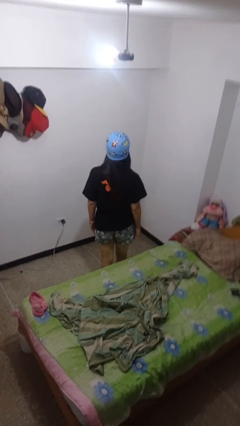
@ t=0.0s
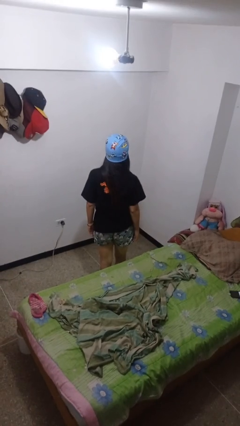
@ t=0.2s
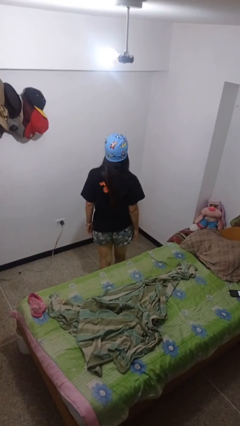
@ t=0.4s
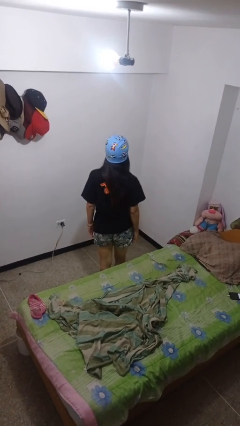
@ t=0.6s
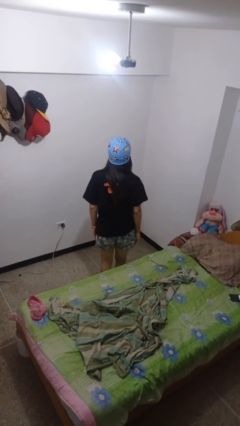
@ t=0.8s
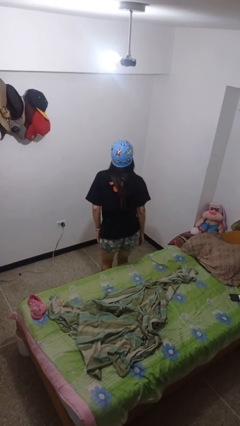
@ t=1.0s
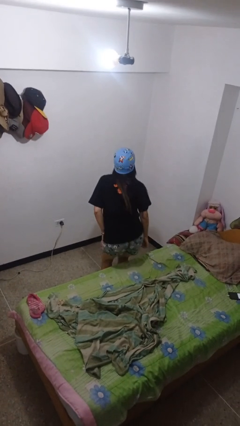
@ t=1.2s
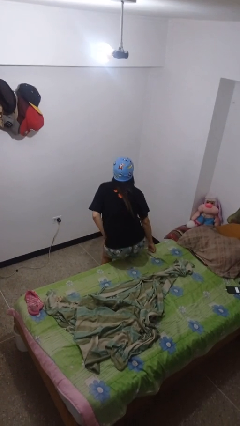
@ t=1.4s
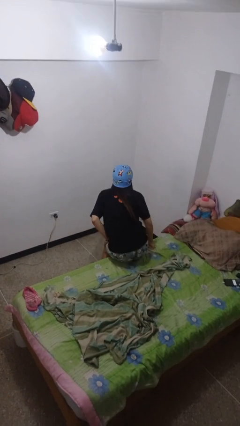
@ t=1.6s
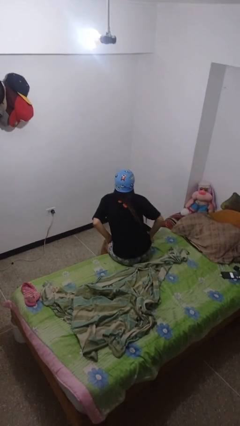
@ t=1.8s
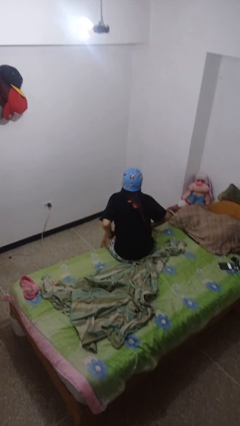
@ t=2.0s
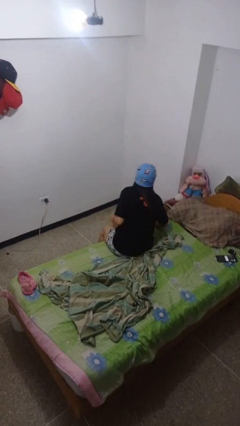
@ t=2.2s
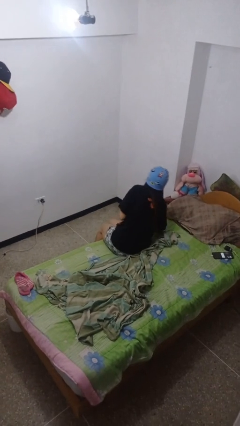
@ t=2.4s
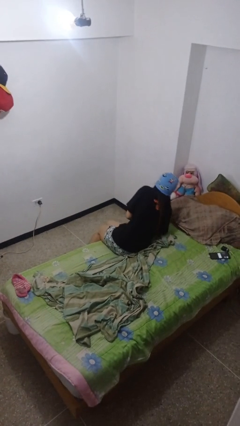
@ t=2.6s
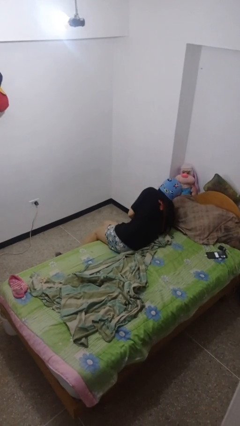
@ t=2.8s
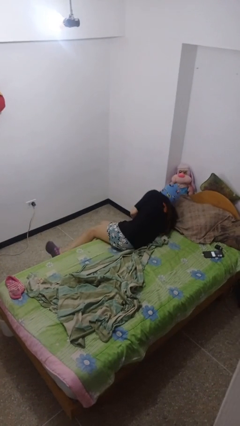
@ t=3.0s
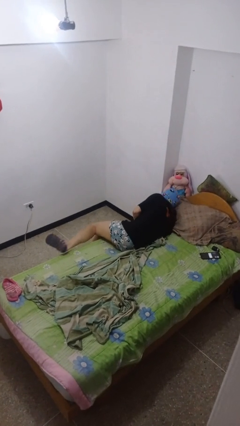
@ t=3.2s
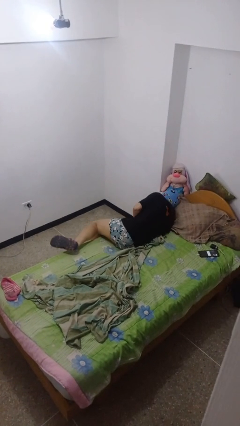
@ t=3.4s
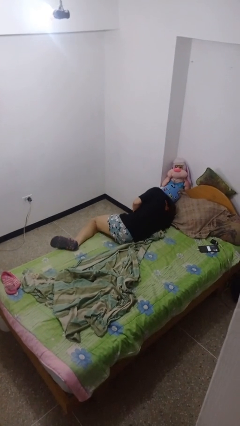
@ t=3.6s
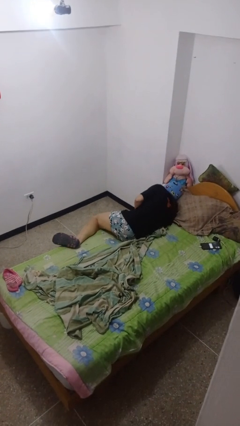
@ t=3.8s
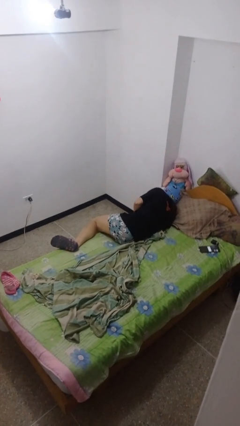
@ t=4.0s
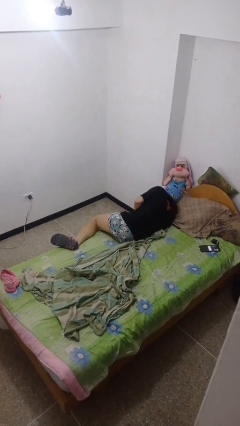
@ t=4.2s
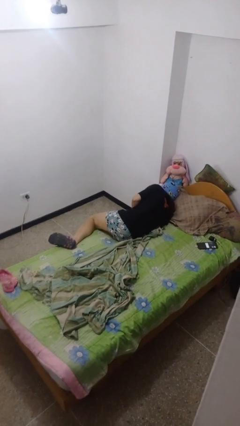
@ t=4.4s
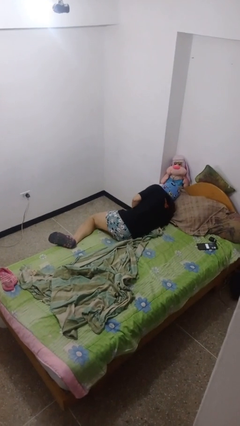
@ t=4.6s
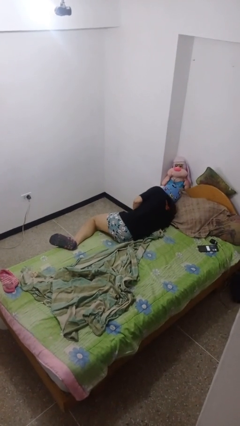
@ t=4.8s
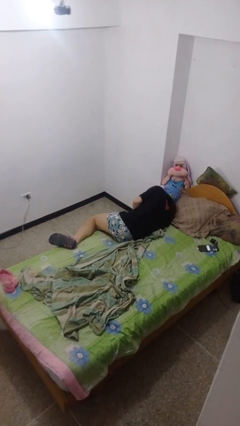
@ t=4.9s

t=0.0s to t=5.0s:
person lies down on bed

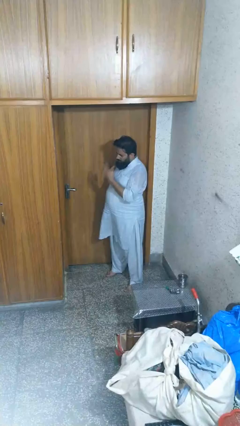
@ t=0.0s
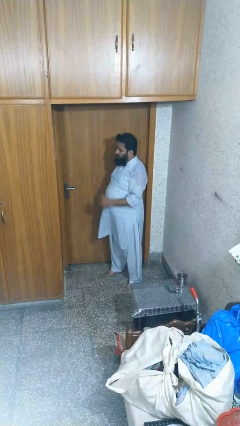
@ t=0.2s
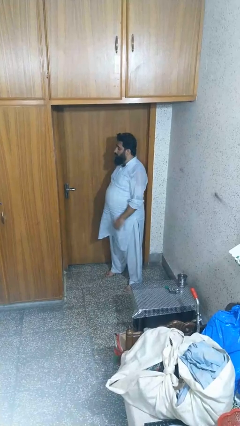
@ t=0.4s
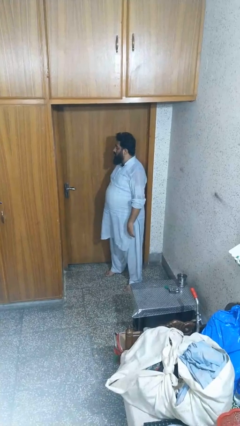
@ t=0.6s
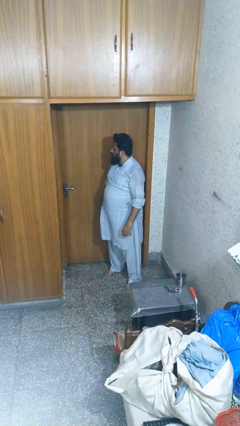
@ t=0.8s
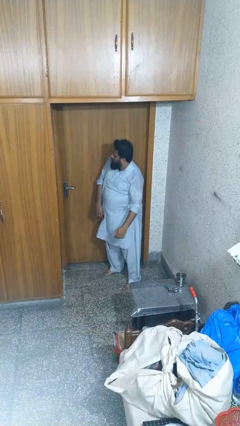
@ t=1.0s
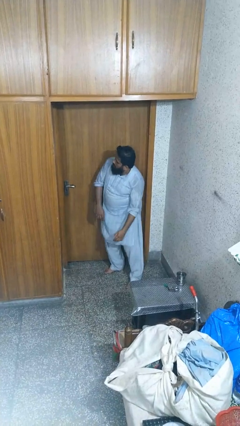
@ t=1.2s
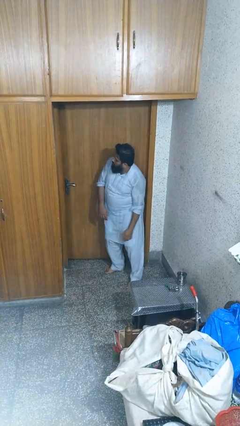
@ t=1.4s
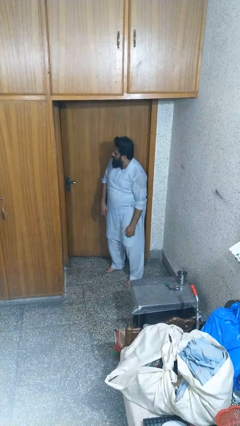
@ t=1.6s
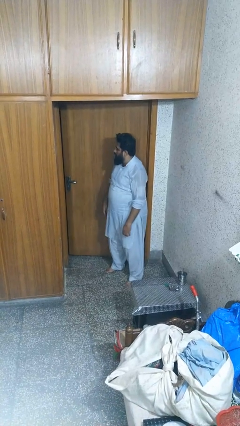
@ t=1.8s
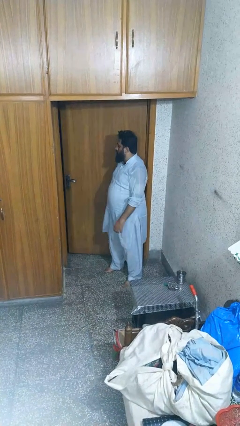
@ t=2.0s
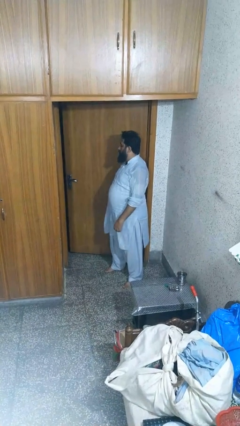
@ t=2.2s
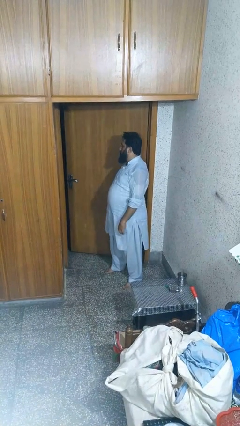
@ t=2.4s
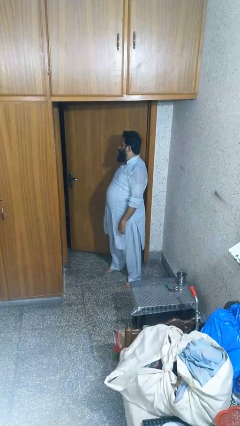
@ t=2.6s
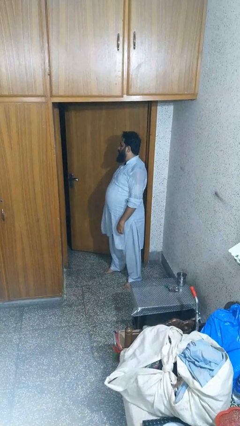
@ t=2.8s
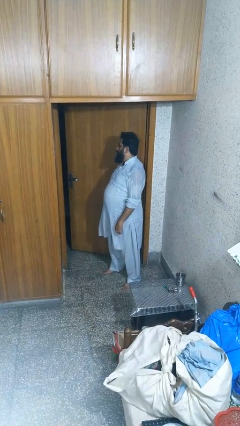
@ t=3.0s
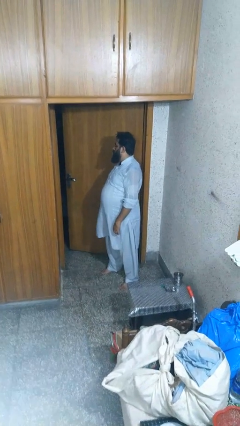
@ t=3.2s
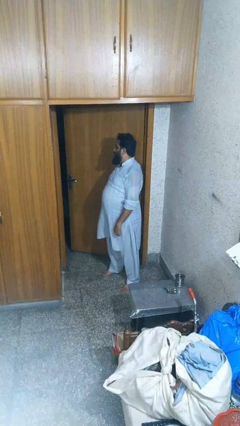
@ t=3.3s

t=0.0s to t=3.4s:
person opens facility door

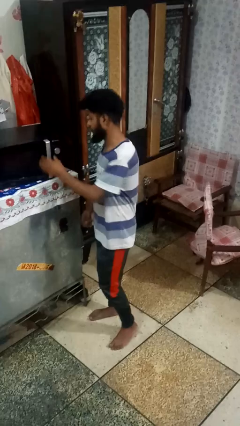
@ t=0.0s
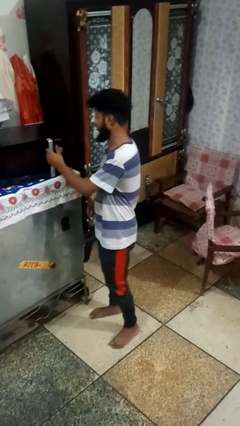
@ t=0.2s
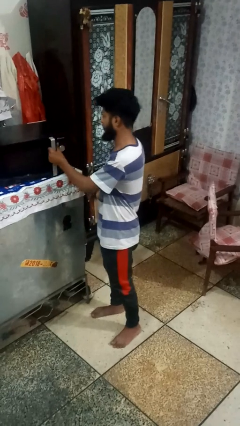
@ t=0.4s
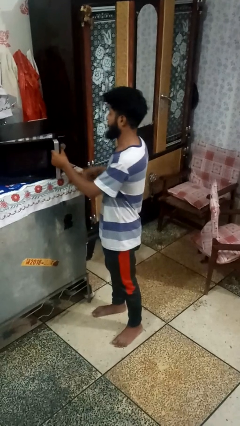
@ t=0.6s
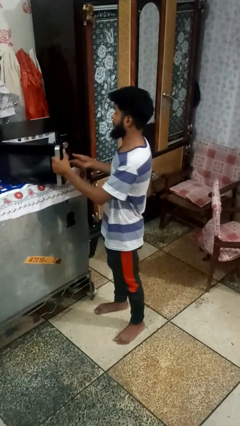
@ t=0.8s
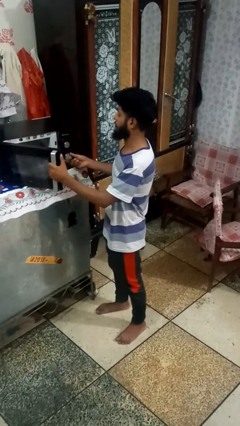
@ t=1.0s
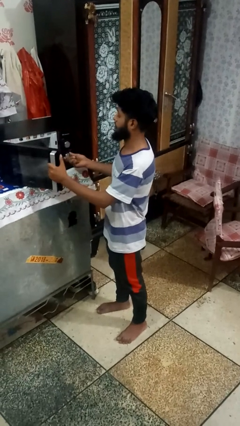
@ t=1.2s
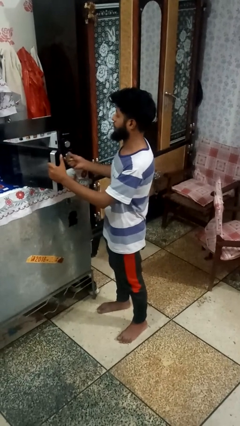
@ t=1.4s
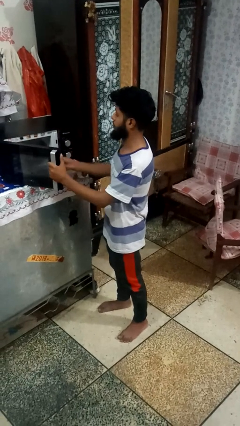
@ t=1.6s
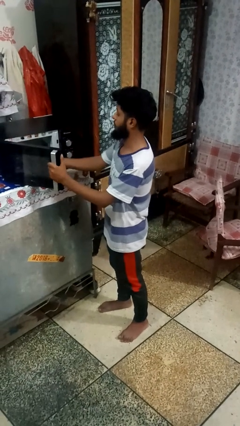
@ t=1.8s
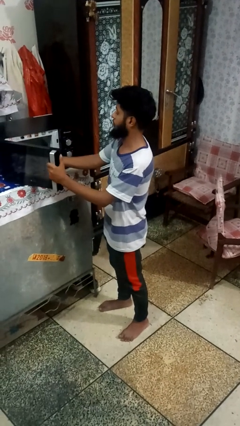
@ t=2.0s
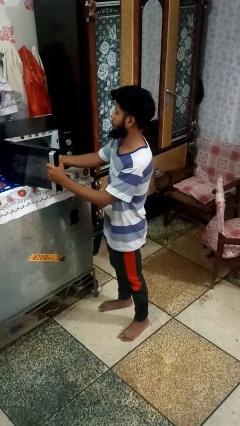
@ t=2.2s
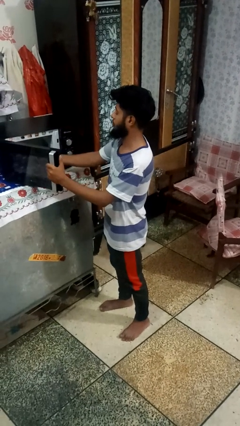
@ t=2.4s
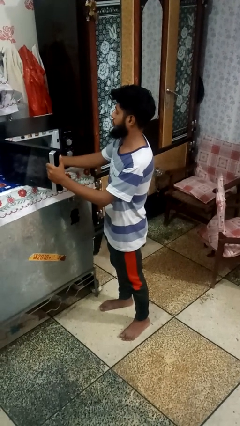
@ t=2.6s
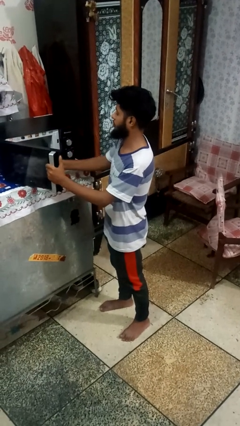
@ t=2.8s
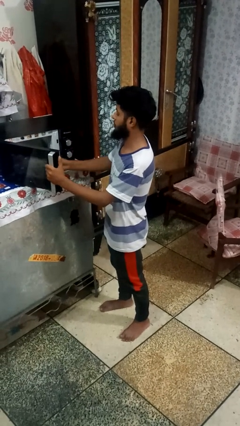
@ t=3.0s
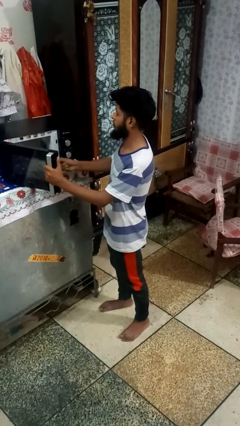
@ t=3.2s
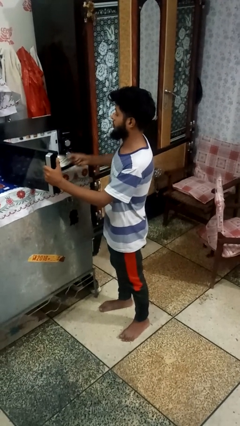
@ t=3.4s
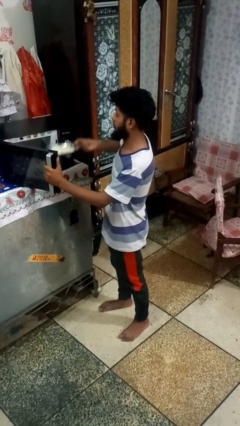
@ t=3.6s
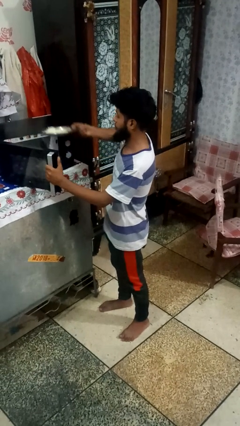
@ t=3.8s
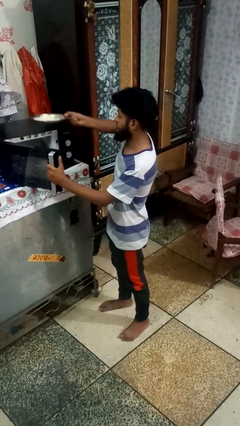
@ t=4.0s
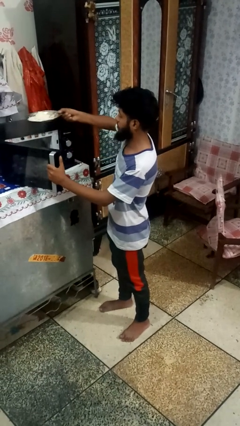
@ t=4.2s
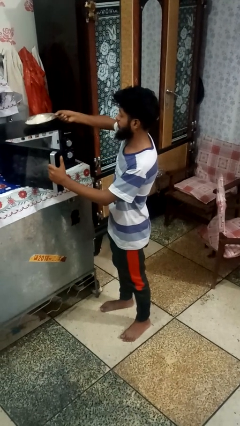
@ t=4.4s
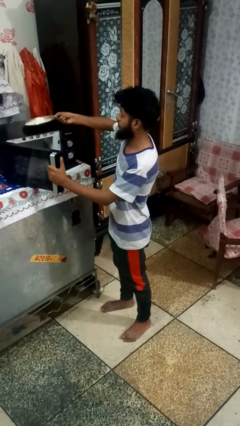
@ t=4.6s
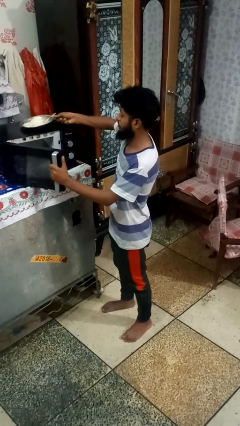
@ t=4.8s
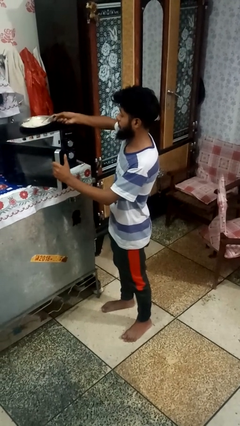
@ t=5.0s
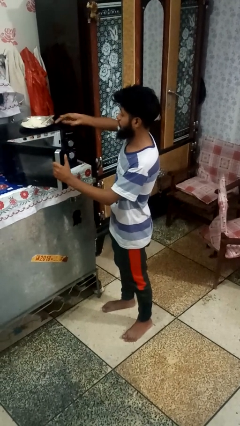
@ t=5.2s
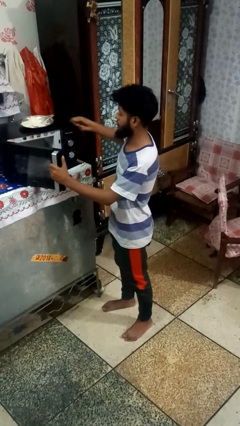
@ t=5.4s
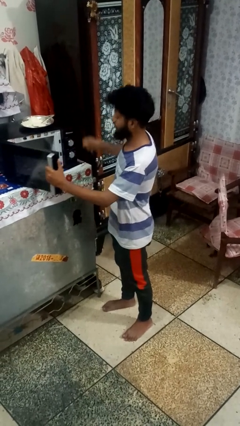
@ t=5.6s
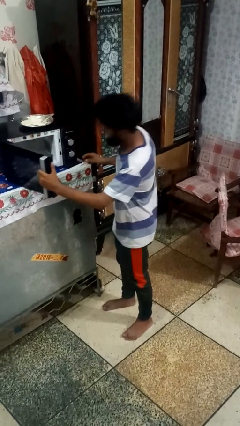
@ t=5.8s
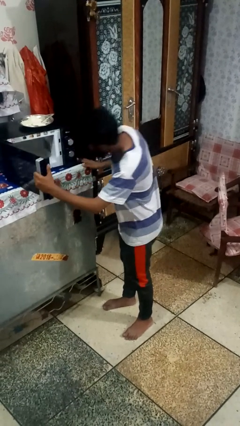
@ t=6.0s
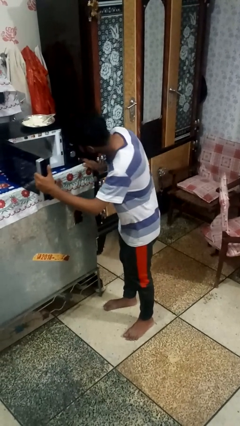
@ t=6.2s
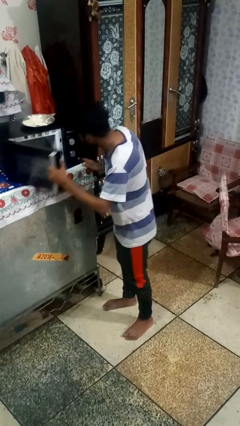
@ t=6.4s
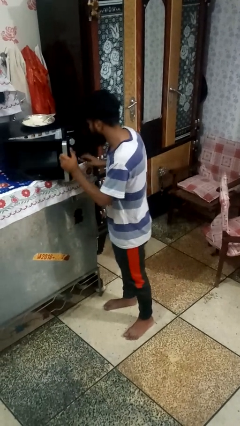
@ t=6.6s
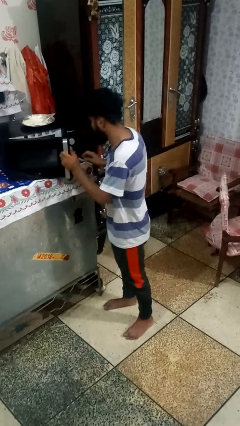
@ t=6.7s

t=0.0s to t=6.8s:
person opens oven door

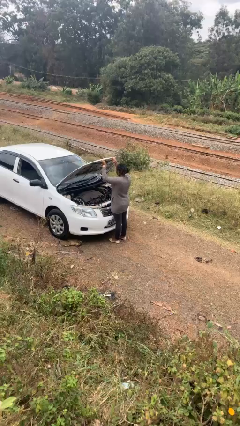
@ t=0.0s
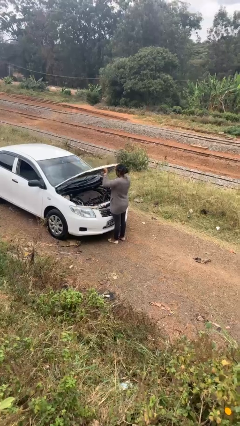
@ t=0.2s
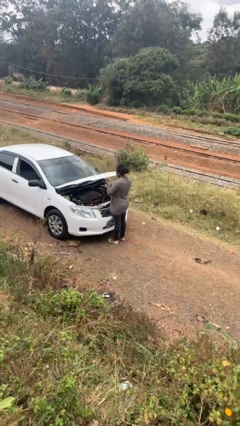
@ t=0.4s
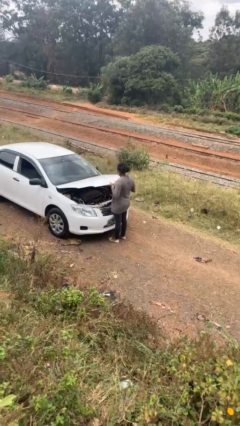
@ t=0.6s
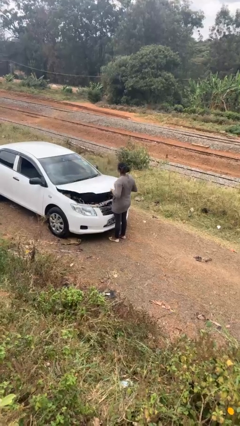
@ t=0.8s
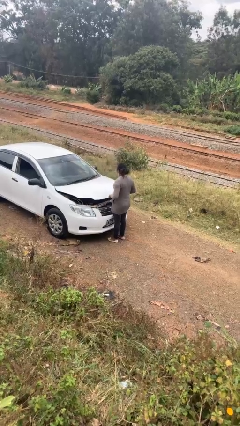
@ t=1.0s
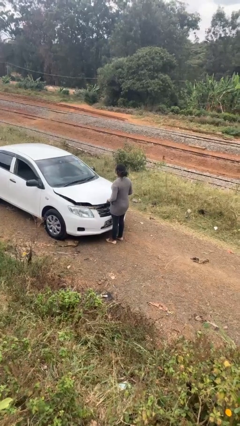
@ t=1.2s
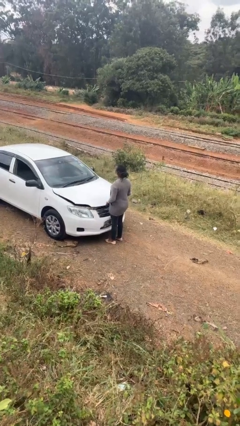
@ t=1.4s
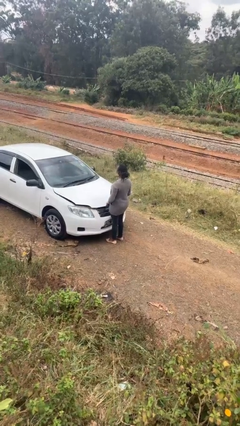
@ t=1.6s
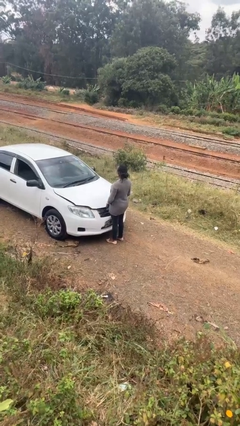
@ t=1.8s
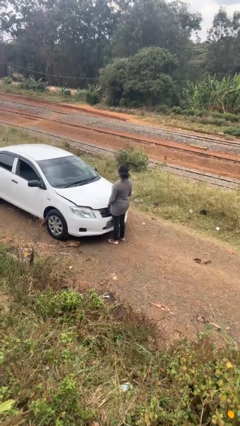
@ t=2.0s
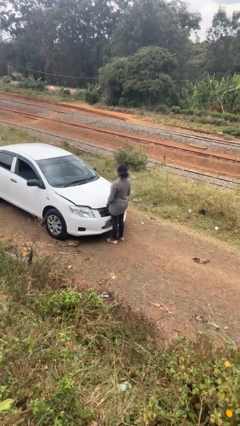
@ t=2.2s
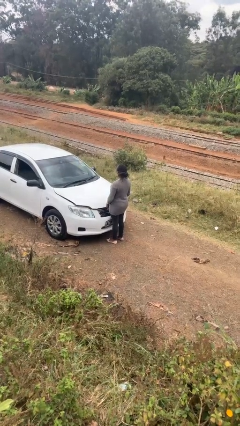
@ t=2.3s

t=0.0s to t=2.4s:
person closes car hood

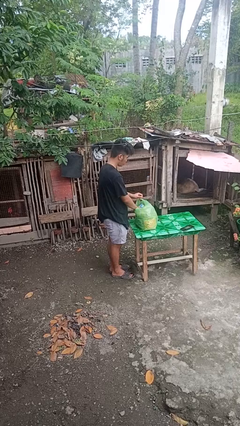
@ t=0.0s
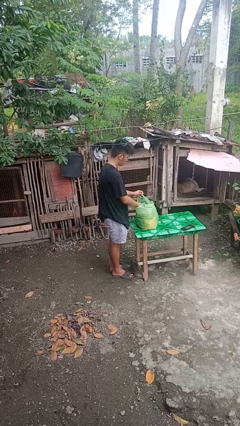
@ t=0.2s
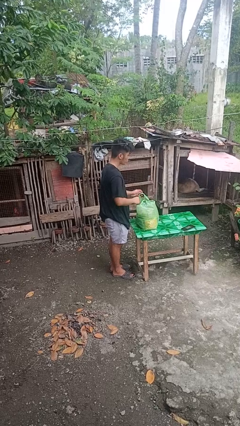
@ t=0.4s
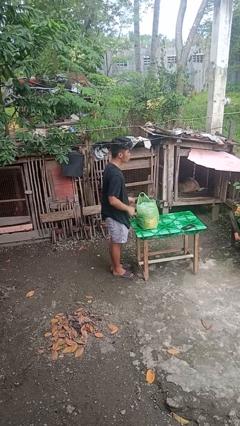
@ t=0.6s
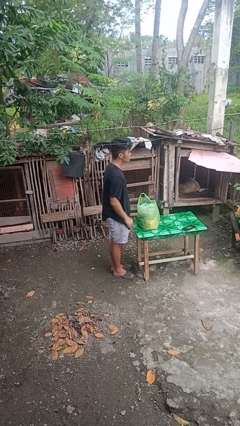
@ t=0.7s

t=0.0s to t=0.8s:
person puts object into bag
